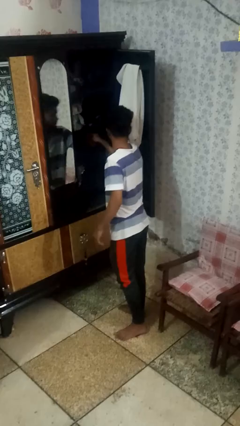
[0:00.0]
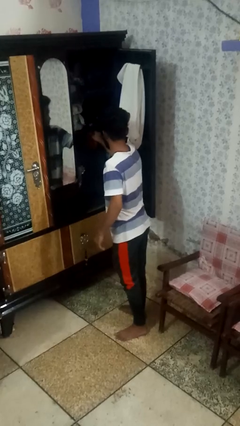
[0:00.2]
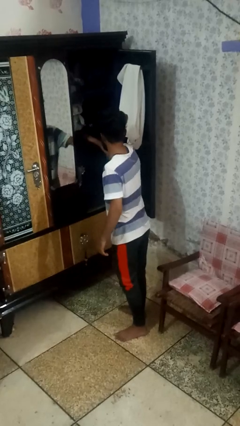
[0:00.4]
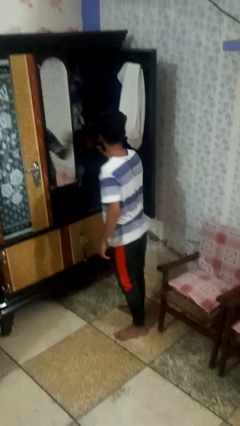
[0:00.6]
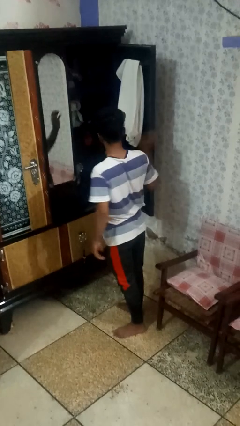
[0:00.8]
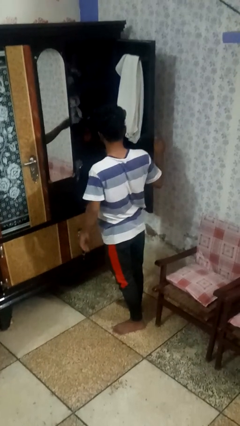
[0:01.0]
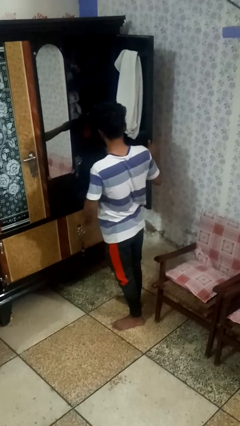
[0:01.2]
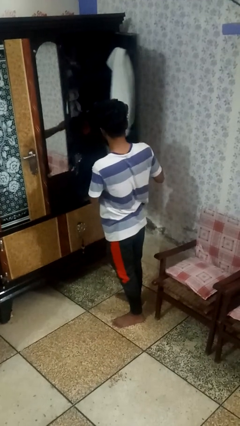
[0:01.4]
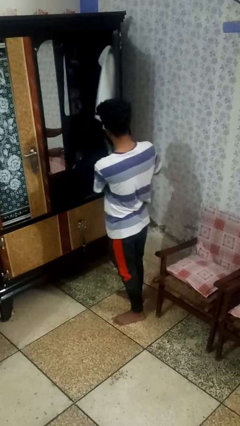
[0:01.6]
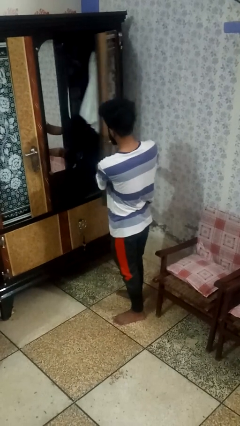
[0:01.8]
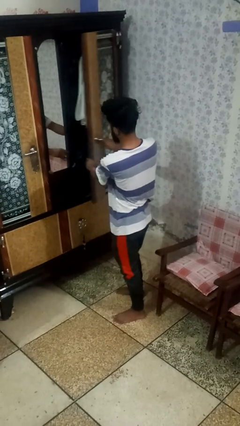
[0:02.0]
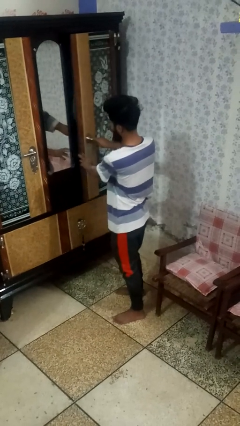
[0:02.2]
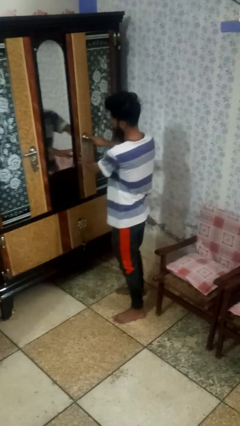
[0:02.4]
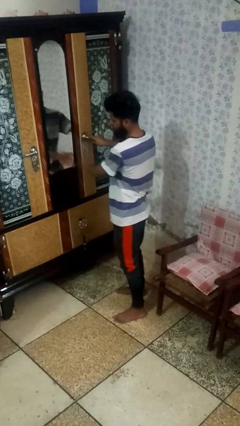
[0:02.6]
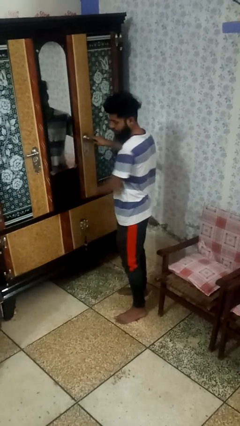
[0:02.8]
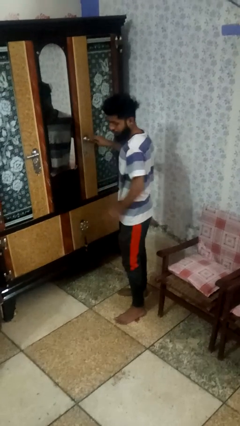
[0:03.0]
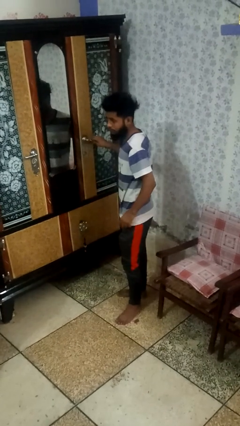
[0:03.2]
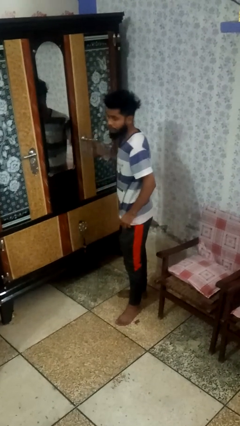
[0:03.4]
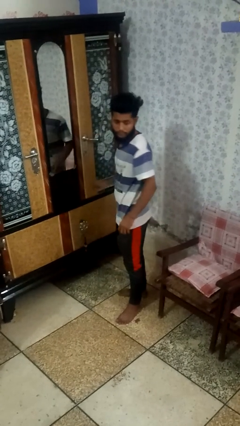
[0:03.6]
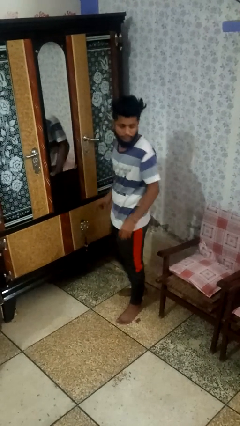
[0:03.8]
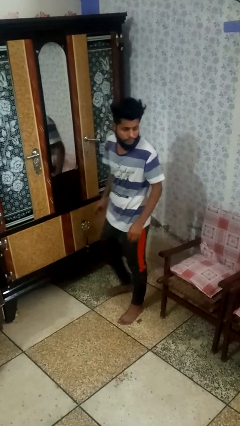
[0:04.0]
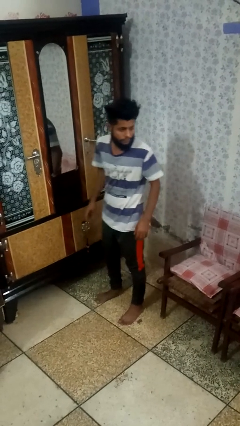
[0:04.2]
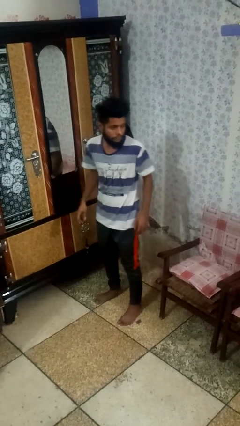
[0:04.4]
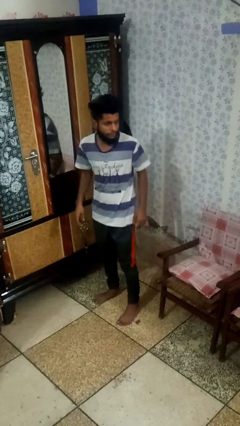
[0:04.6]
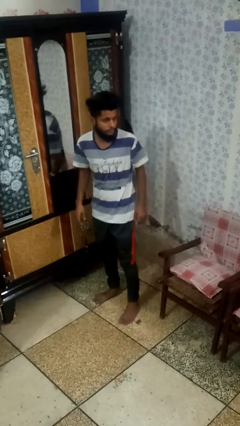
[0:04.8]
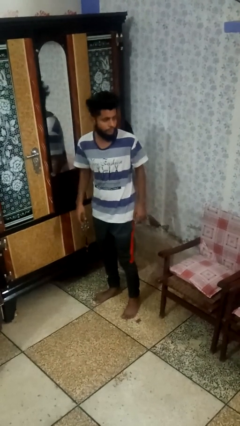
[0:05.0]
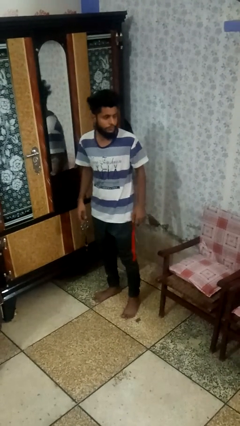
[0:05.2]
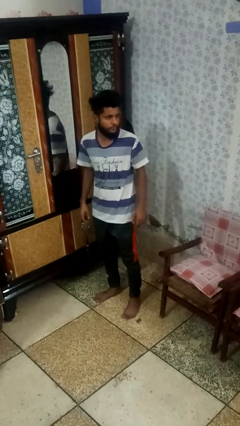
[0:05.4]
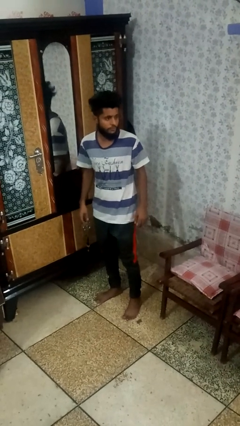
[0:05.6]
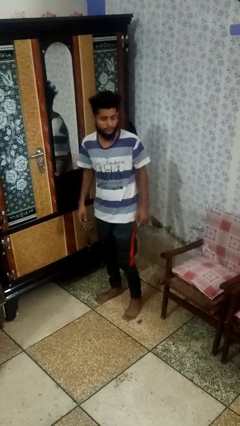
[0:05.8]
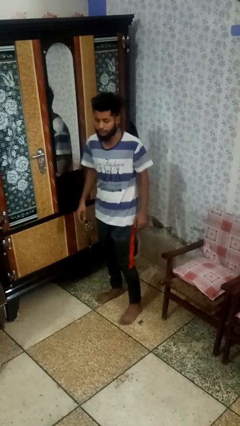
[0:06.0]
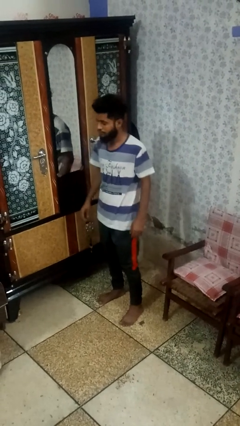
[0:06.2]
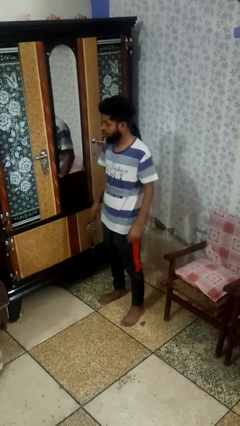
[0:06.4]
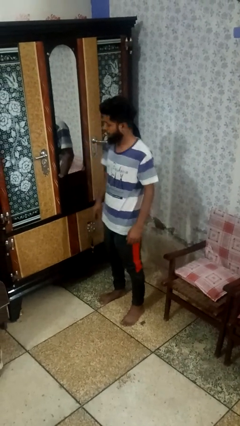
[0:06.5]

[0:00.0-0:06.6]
person closes dresser drawer

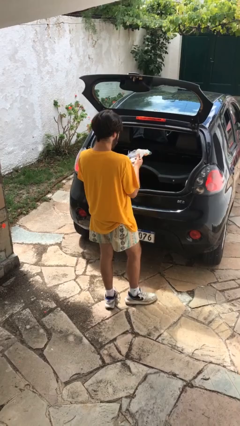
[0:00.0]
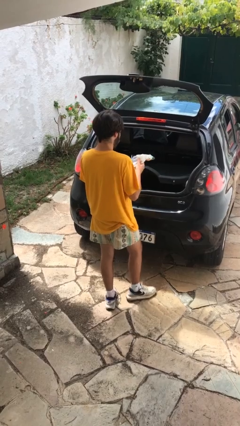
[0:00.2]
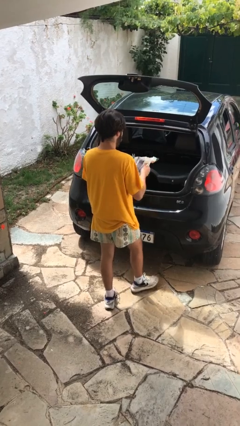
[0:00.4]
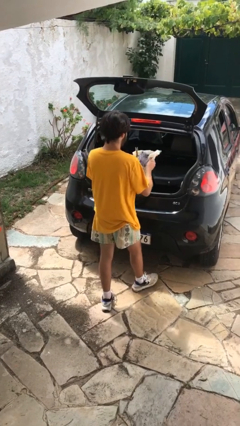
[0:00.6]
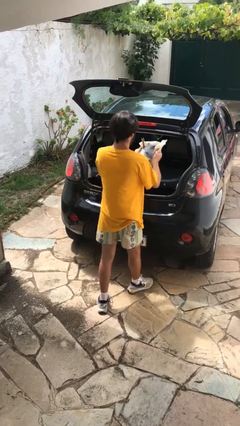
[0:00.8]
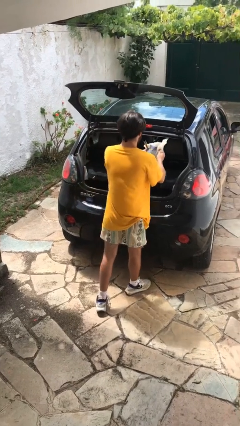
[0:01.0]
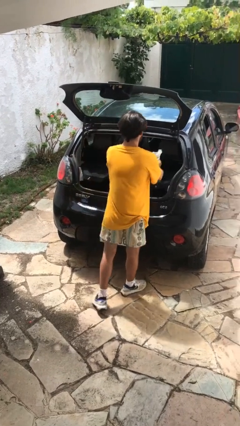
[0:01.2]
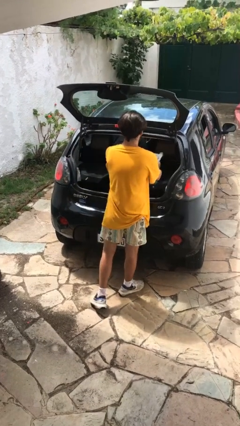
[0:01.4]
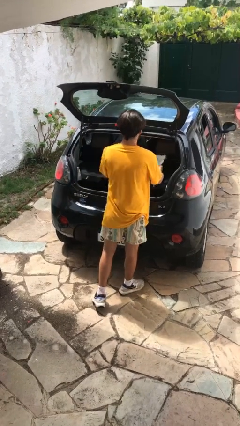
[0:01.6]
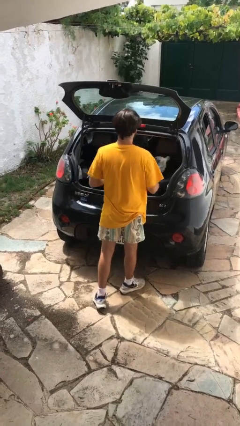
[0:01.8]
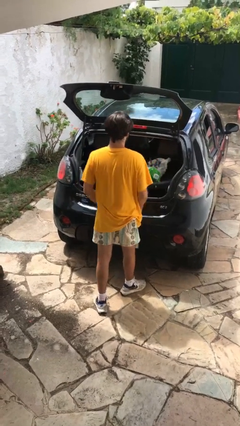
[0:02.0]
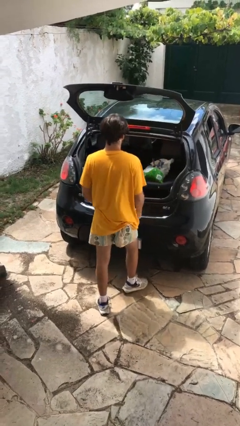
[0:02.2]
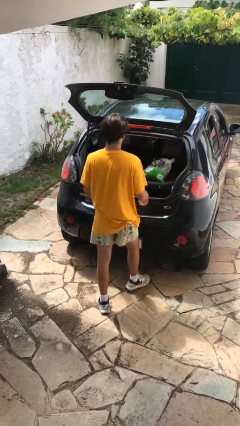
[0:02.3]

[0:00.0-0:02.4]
person loads car

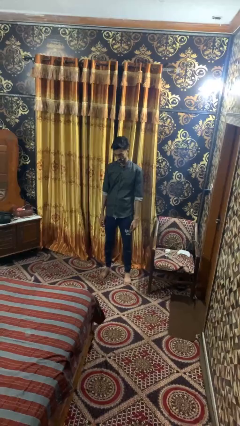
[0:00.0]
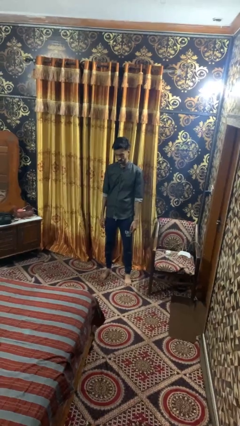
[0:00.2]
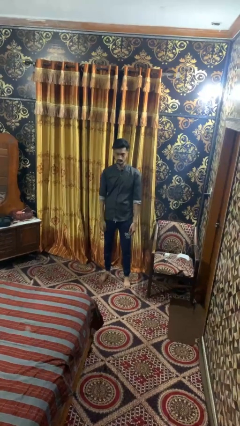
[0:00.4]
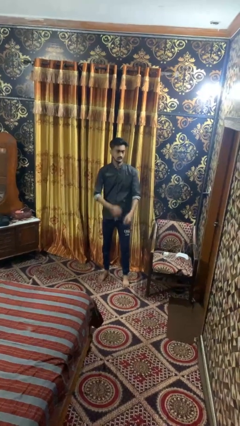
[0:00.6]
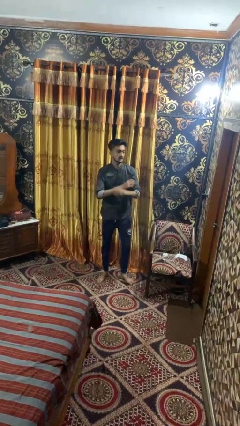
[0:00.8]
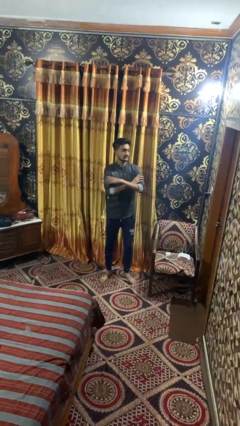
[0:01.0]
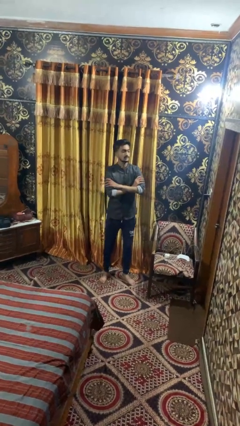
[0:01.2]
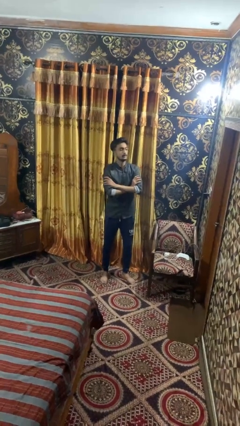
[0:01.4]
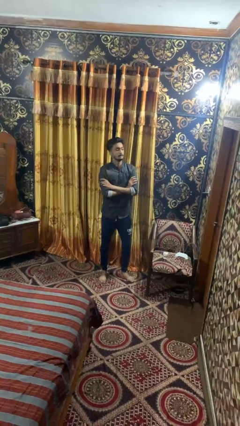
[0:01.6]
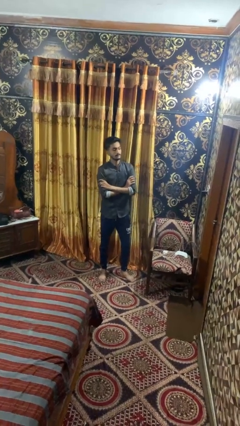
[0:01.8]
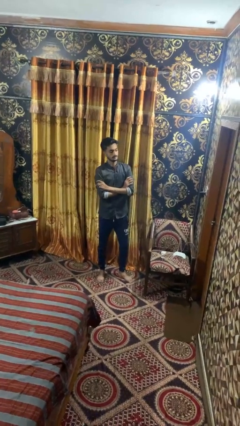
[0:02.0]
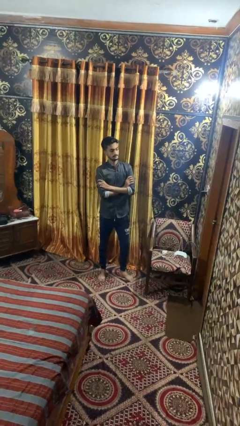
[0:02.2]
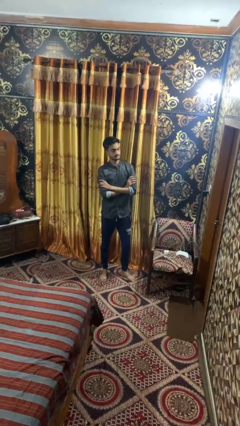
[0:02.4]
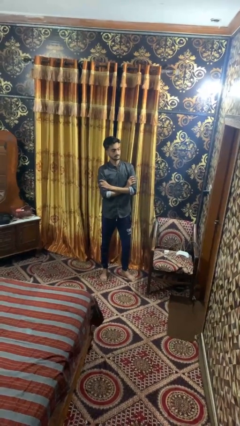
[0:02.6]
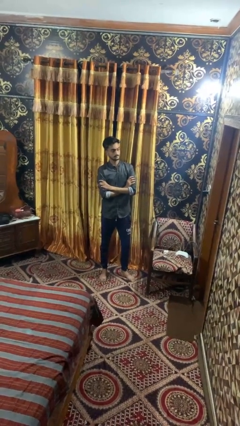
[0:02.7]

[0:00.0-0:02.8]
person crosses arms

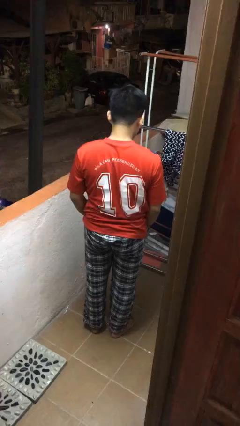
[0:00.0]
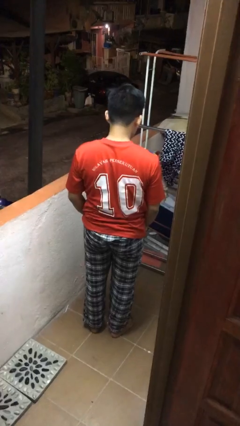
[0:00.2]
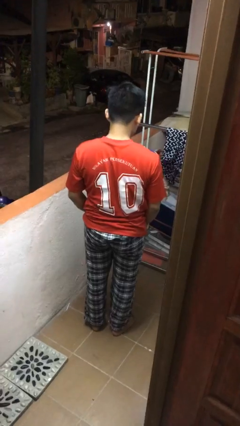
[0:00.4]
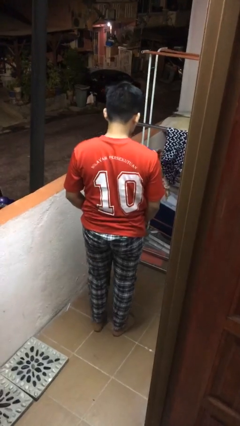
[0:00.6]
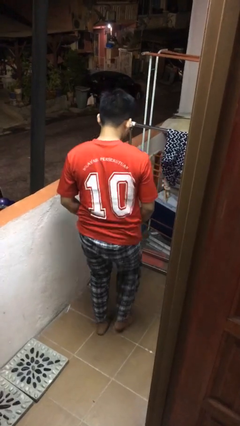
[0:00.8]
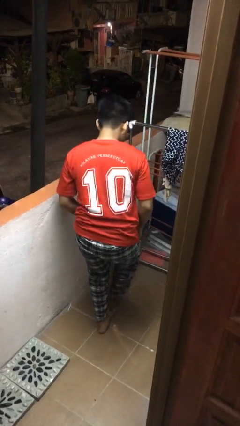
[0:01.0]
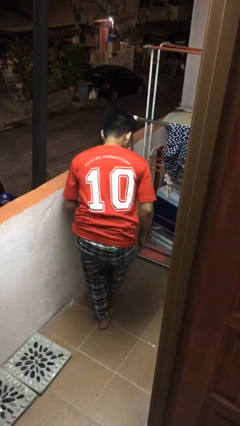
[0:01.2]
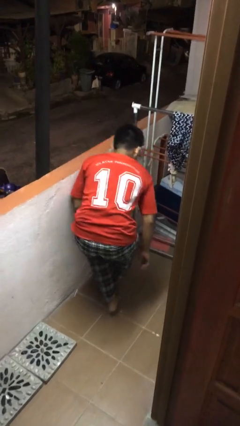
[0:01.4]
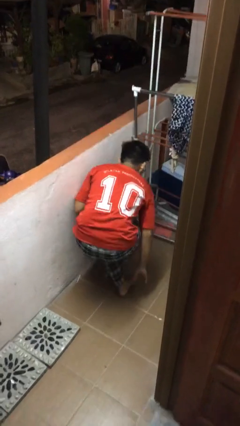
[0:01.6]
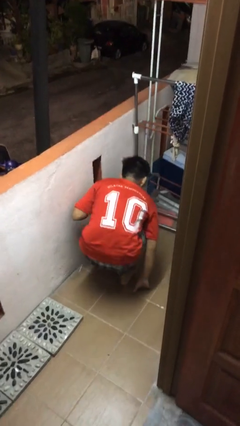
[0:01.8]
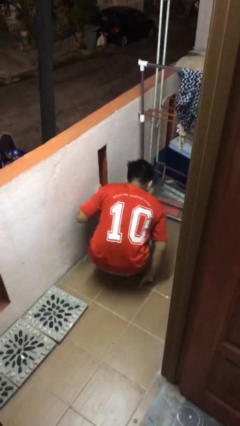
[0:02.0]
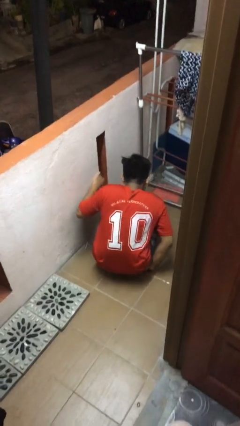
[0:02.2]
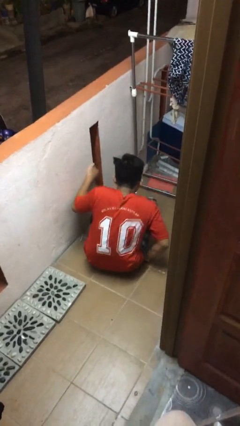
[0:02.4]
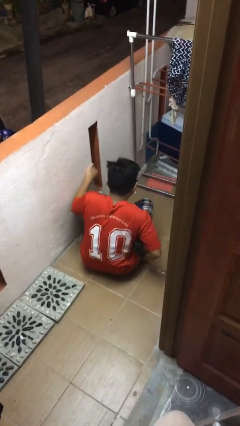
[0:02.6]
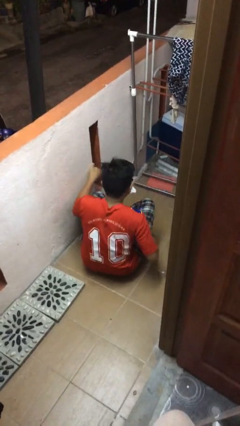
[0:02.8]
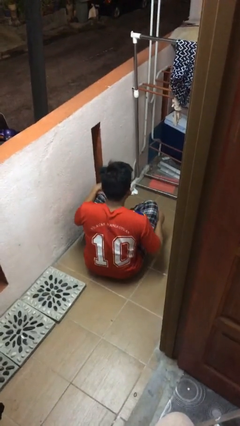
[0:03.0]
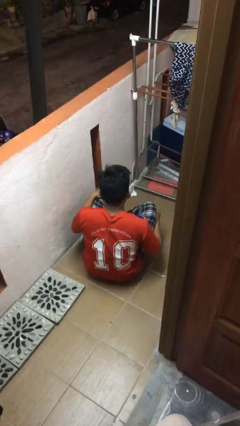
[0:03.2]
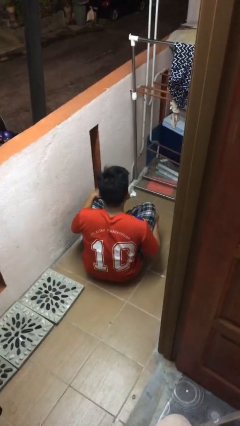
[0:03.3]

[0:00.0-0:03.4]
person sits crisscross

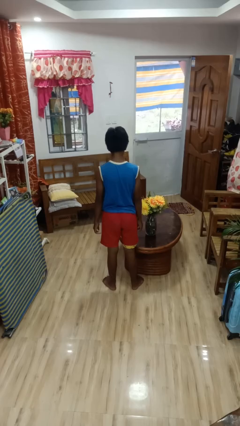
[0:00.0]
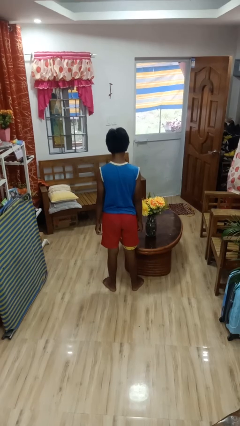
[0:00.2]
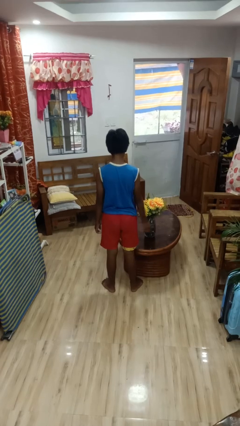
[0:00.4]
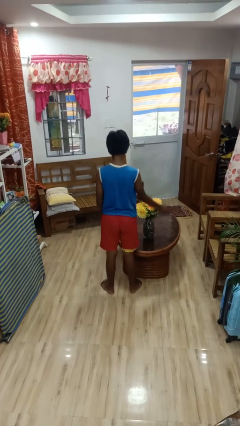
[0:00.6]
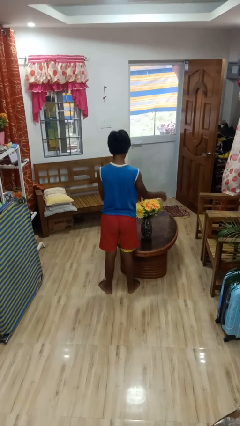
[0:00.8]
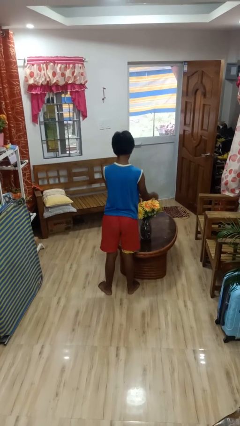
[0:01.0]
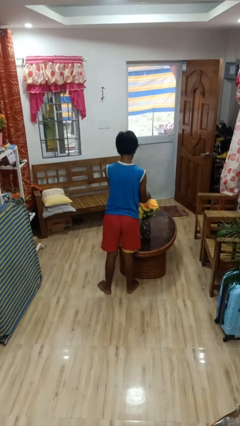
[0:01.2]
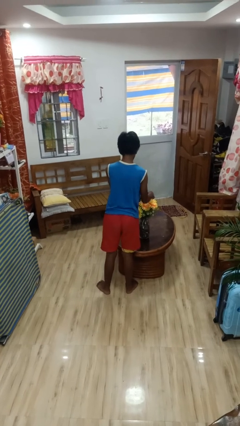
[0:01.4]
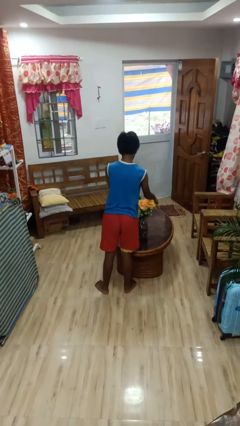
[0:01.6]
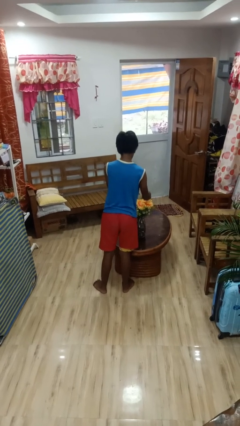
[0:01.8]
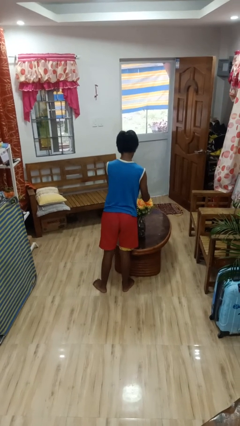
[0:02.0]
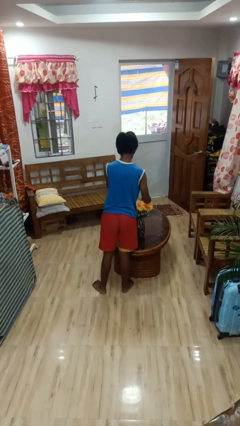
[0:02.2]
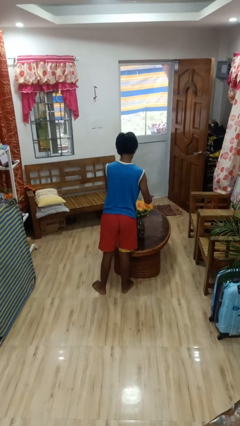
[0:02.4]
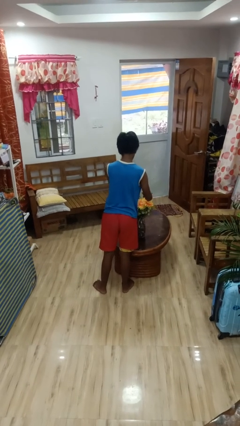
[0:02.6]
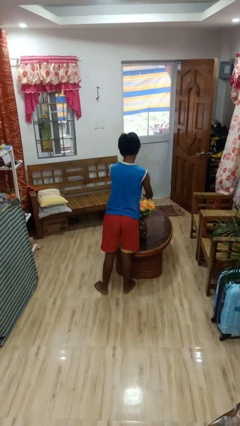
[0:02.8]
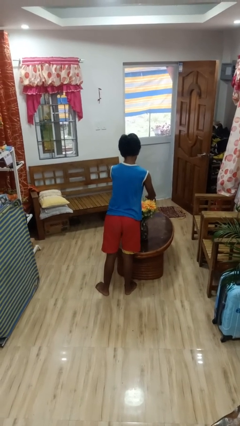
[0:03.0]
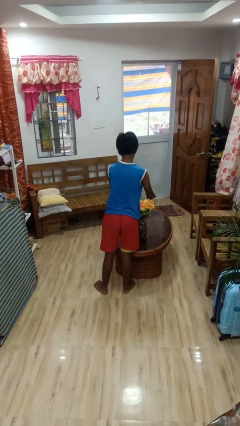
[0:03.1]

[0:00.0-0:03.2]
person arranges flowers in vase
